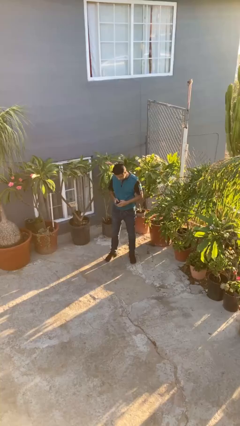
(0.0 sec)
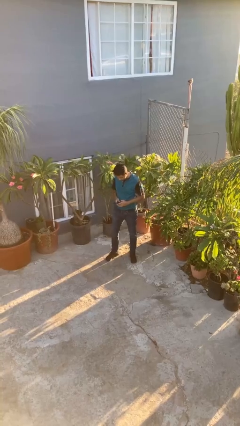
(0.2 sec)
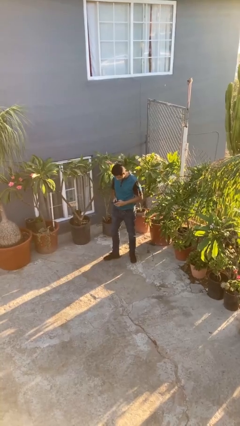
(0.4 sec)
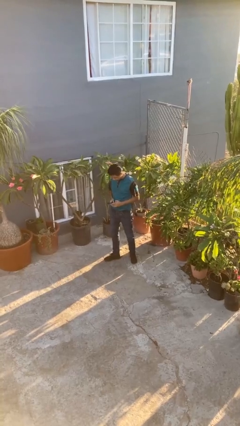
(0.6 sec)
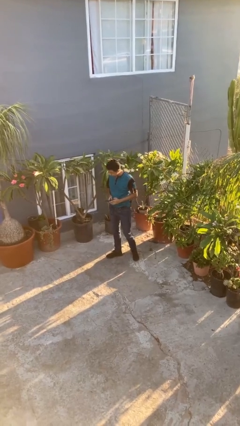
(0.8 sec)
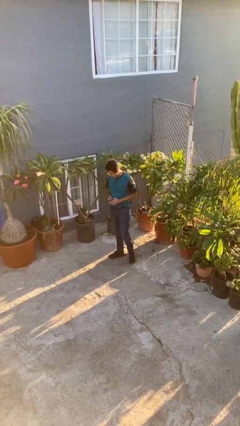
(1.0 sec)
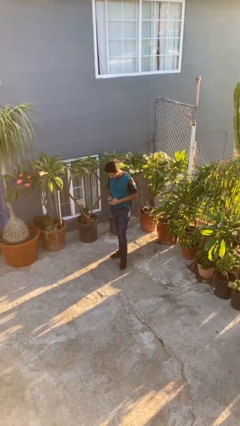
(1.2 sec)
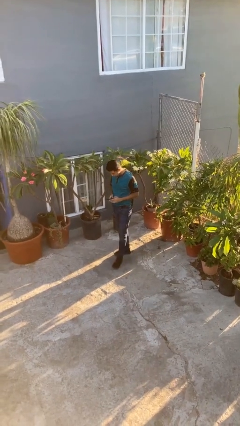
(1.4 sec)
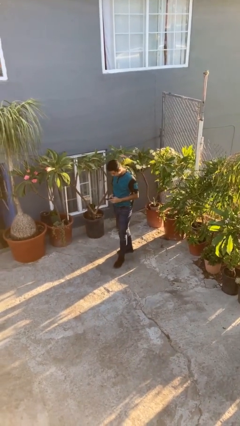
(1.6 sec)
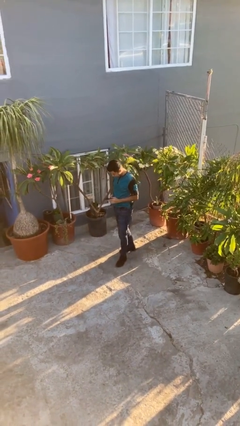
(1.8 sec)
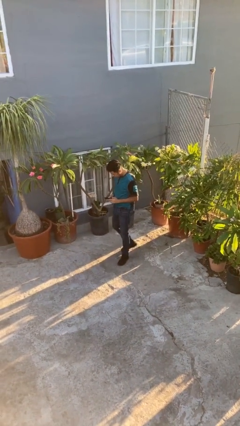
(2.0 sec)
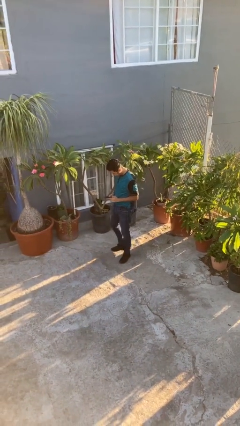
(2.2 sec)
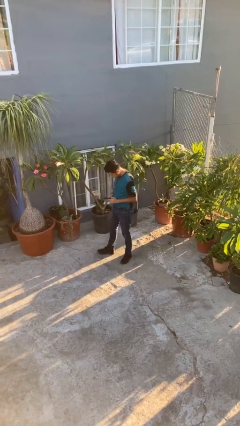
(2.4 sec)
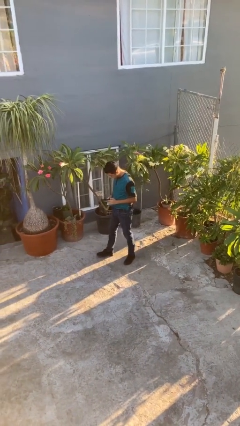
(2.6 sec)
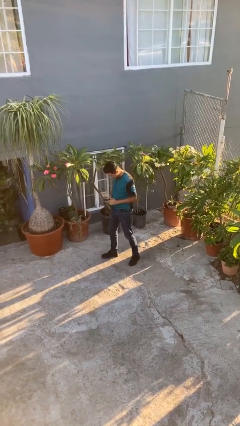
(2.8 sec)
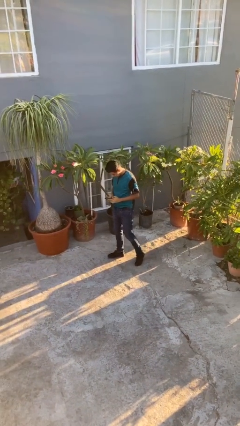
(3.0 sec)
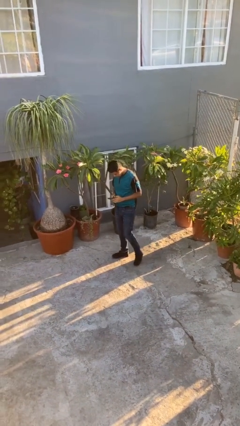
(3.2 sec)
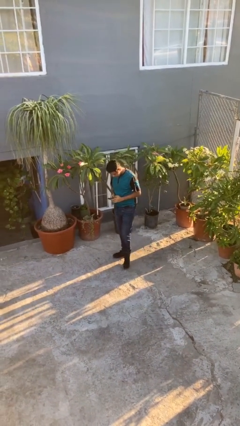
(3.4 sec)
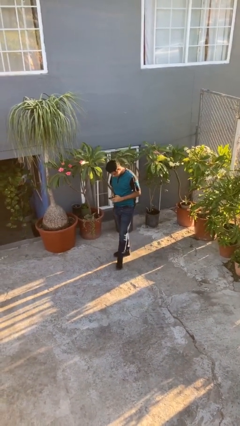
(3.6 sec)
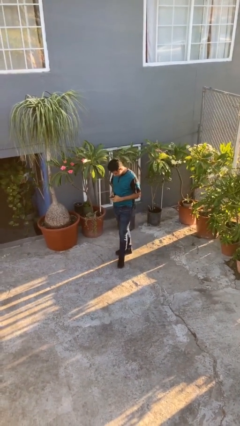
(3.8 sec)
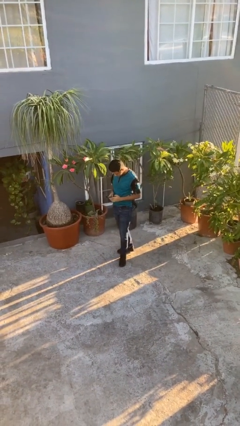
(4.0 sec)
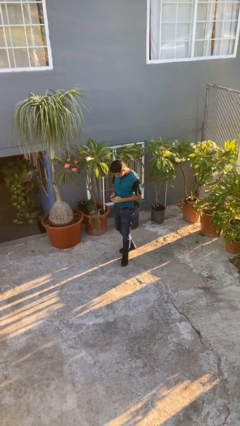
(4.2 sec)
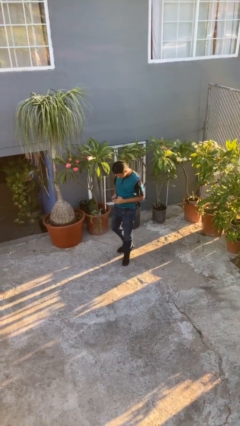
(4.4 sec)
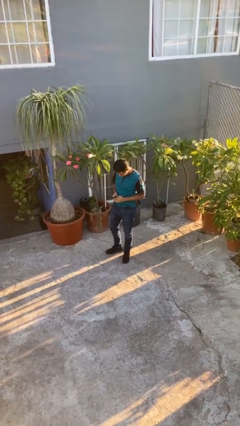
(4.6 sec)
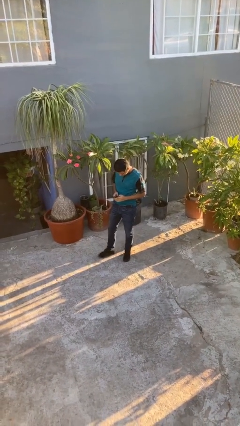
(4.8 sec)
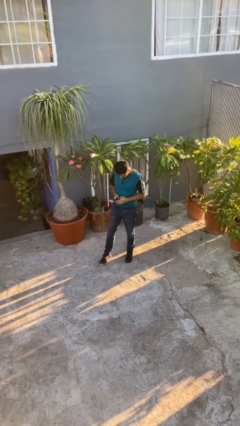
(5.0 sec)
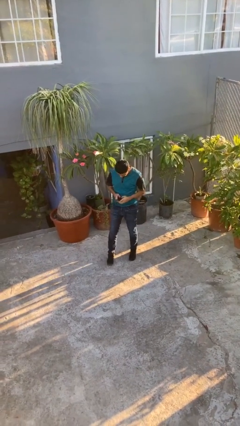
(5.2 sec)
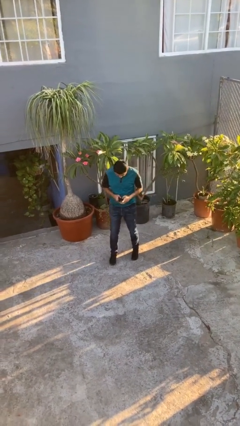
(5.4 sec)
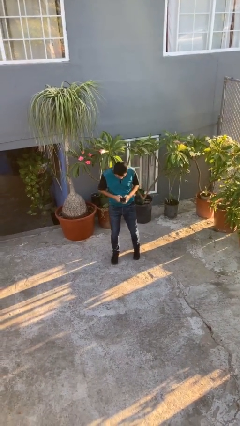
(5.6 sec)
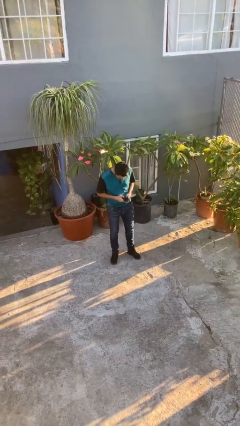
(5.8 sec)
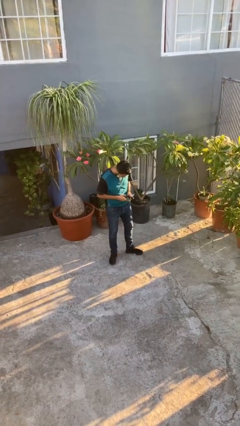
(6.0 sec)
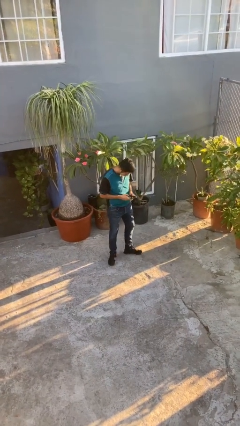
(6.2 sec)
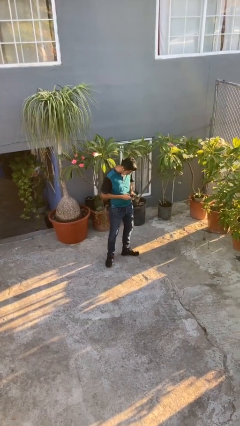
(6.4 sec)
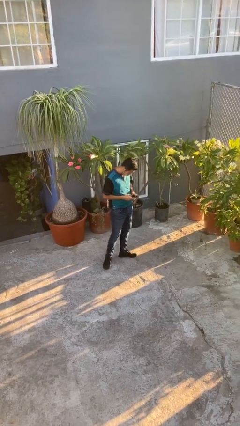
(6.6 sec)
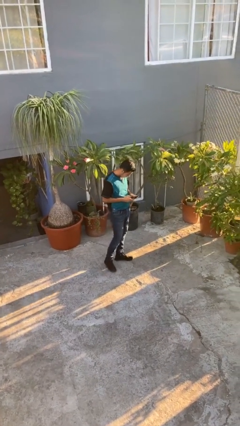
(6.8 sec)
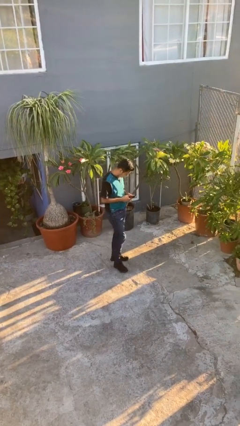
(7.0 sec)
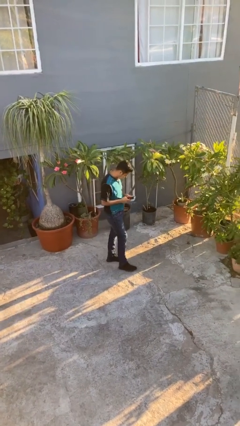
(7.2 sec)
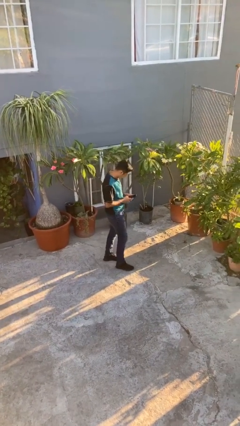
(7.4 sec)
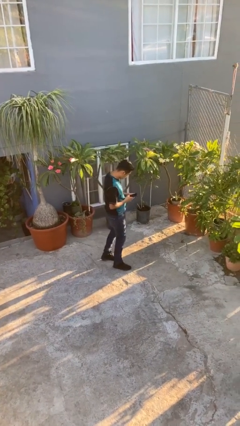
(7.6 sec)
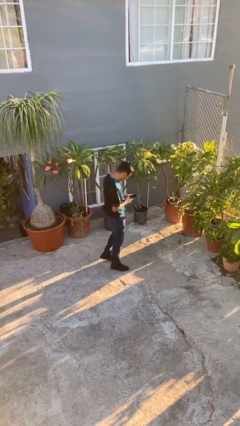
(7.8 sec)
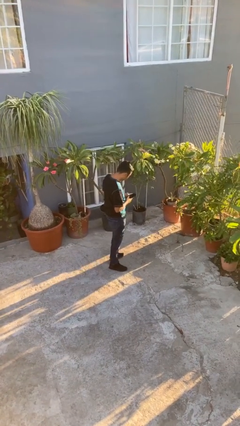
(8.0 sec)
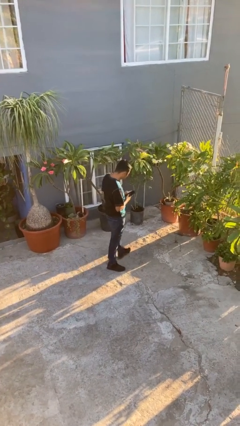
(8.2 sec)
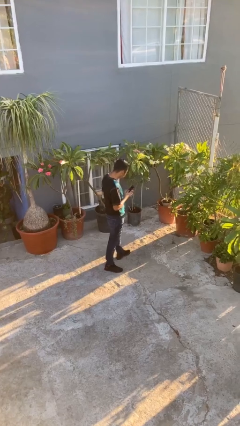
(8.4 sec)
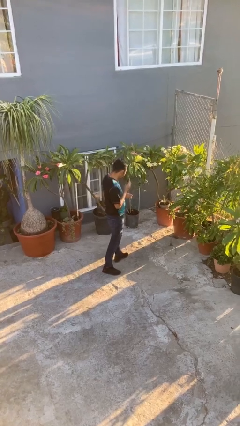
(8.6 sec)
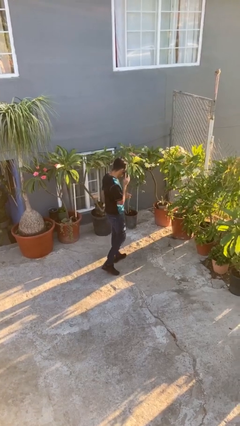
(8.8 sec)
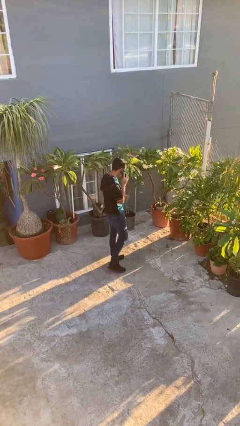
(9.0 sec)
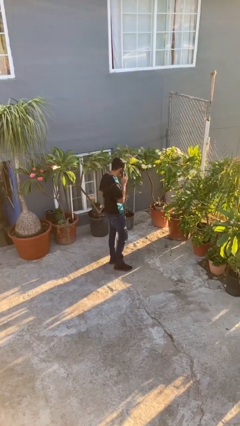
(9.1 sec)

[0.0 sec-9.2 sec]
person texts on phone

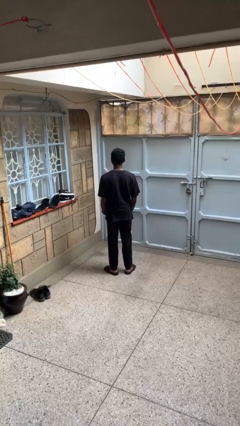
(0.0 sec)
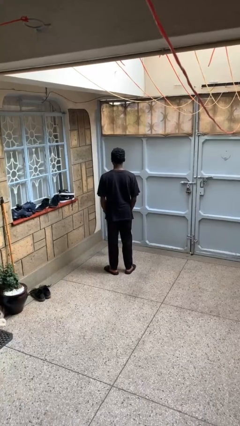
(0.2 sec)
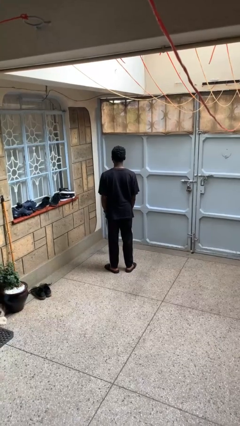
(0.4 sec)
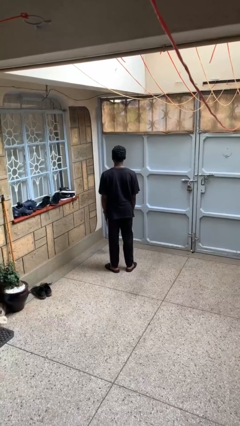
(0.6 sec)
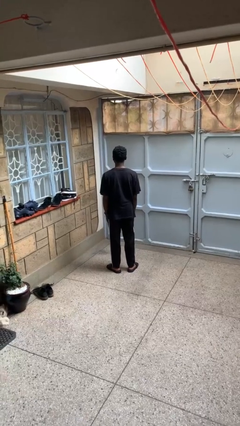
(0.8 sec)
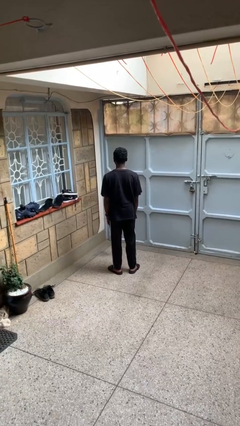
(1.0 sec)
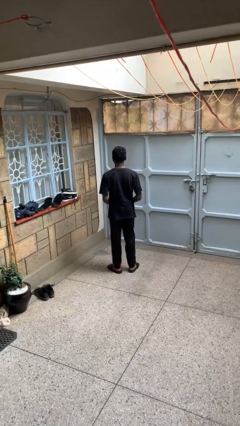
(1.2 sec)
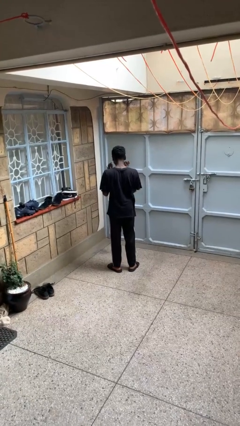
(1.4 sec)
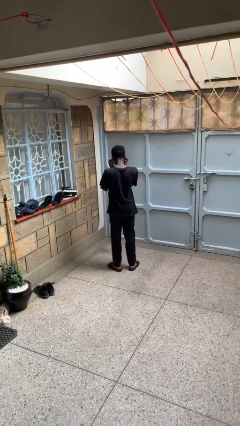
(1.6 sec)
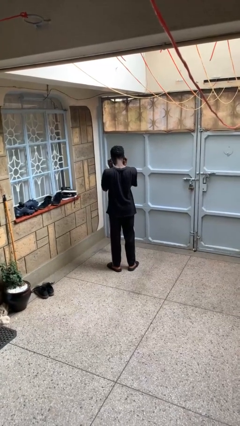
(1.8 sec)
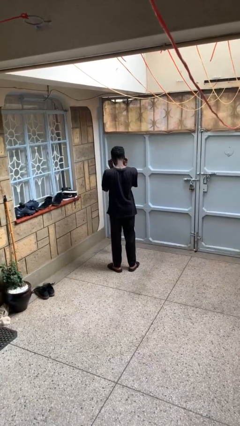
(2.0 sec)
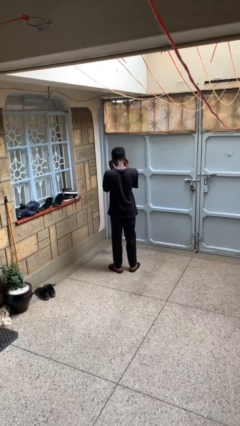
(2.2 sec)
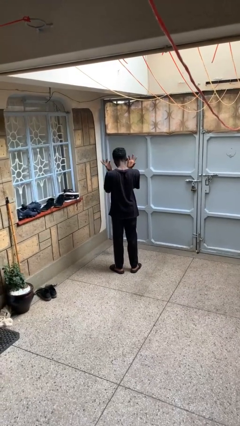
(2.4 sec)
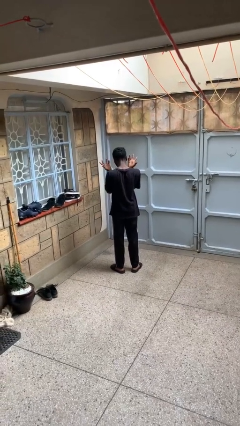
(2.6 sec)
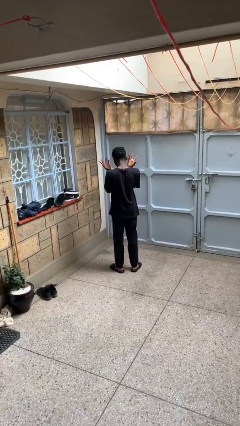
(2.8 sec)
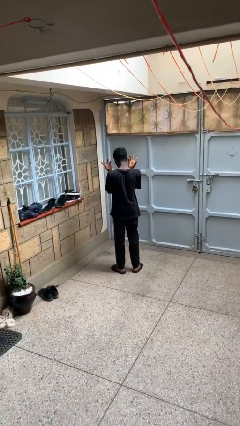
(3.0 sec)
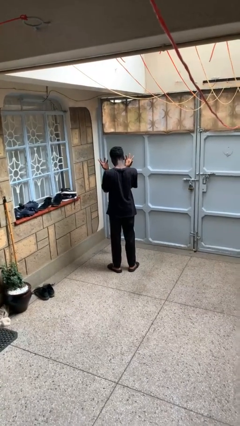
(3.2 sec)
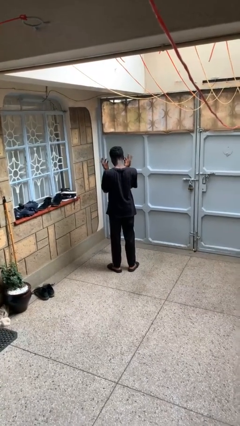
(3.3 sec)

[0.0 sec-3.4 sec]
person puts fingers in ear

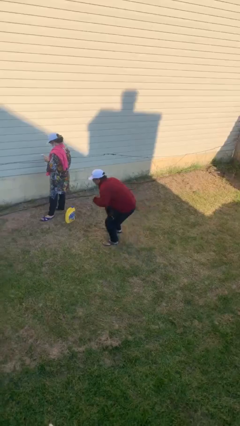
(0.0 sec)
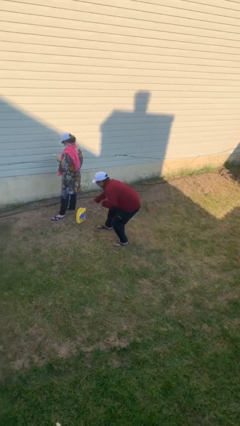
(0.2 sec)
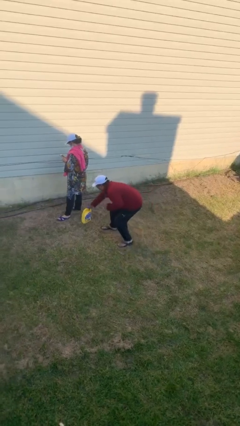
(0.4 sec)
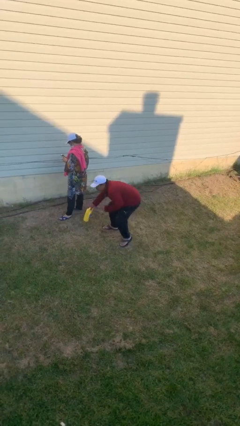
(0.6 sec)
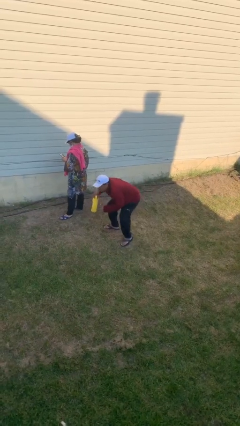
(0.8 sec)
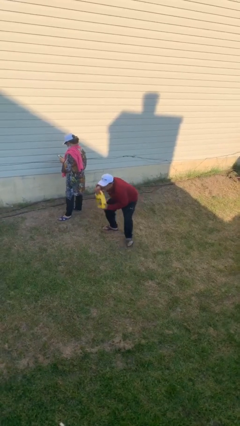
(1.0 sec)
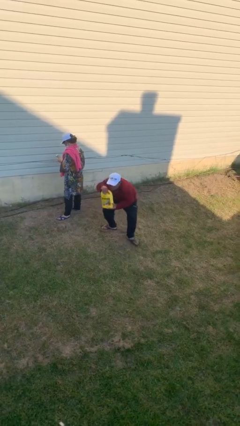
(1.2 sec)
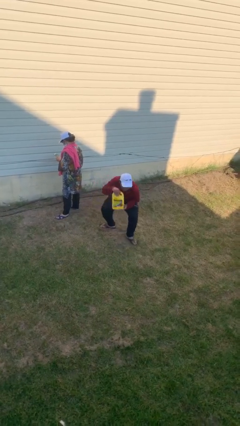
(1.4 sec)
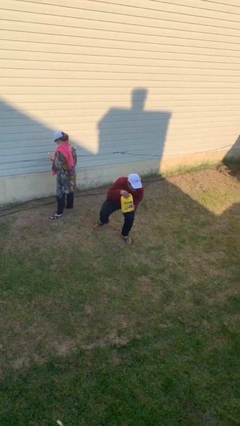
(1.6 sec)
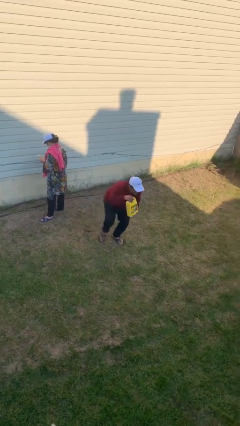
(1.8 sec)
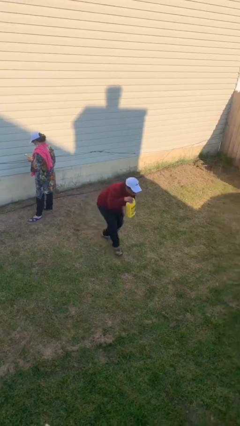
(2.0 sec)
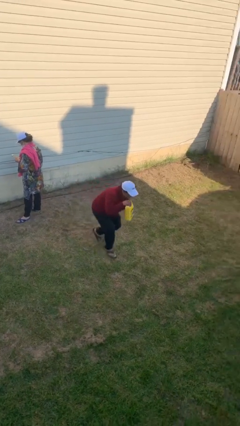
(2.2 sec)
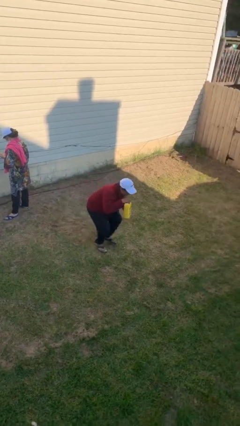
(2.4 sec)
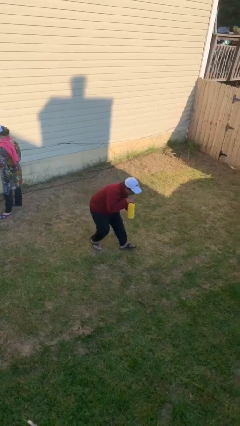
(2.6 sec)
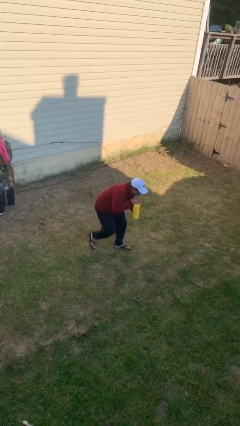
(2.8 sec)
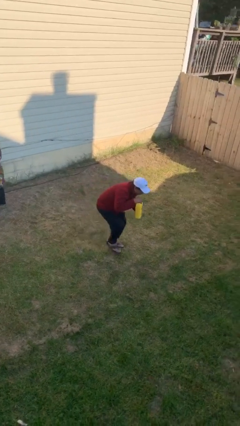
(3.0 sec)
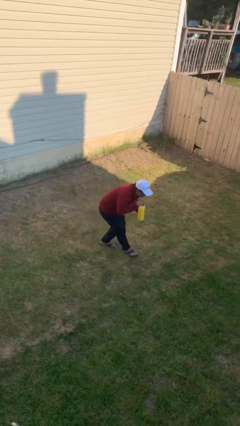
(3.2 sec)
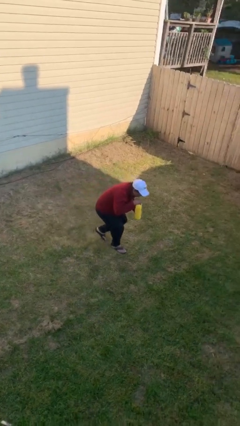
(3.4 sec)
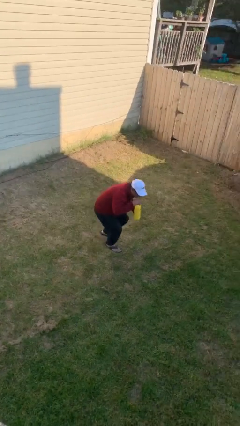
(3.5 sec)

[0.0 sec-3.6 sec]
person steals object from person

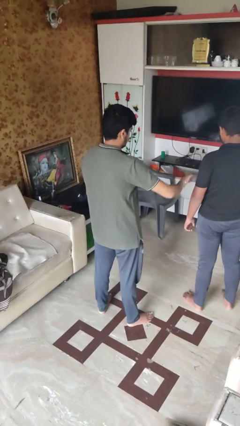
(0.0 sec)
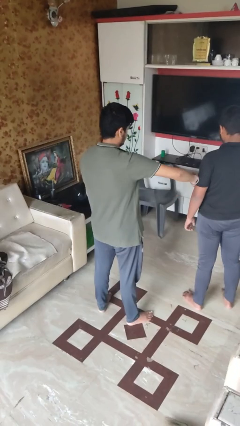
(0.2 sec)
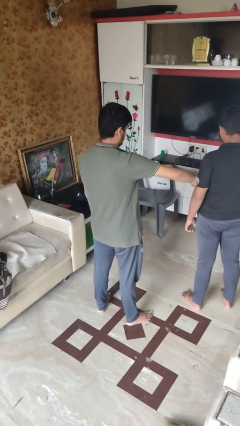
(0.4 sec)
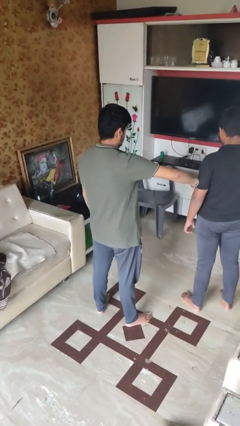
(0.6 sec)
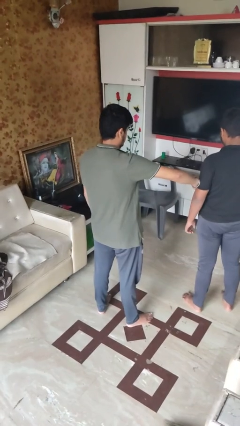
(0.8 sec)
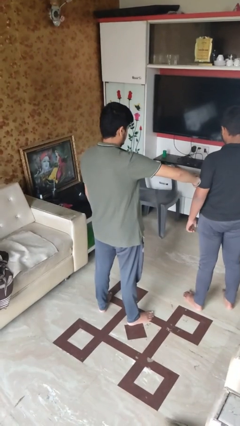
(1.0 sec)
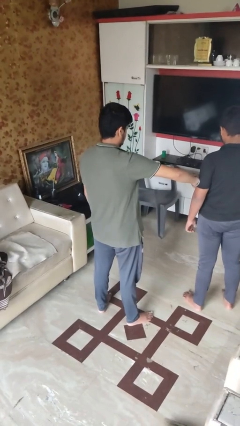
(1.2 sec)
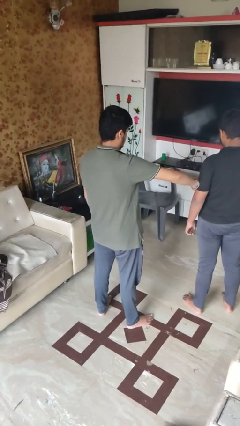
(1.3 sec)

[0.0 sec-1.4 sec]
person grabs person by bicep

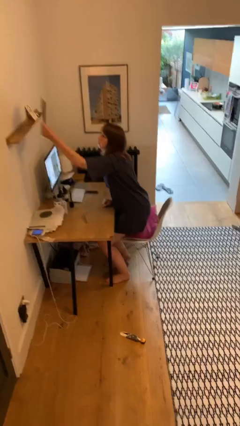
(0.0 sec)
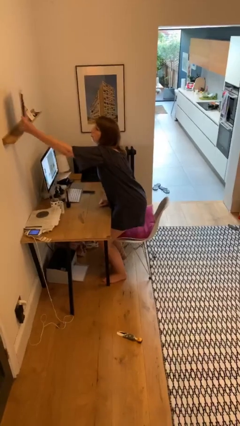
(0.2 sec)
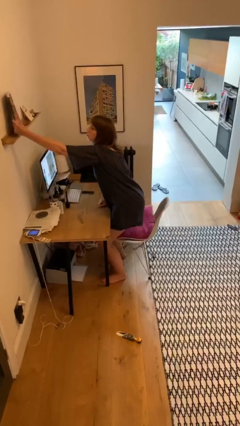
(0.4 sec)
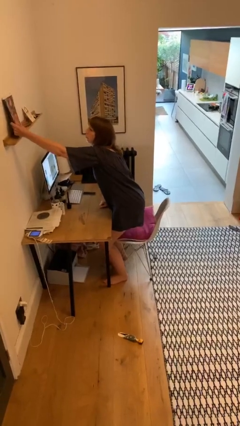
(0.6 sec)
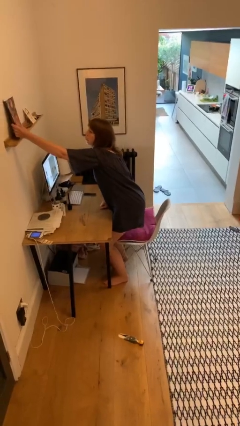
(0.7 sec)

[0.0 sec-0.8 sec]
person puts down object on shelf
